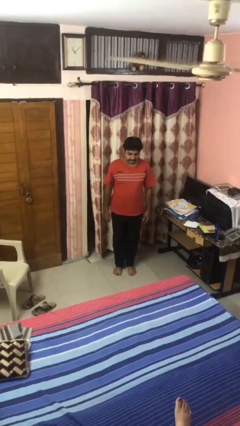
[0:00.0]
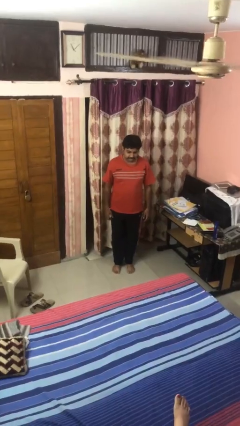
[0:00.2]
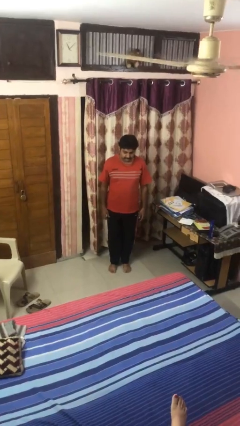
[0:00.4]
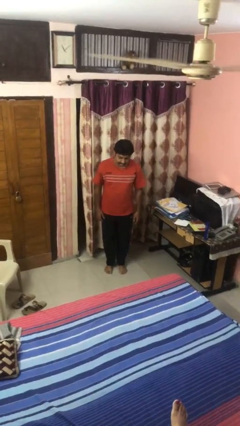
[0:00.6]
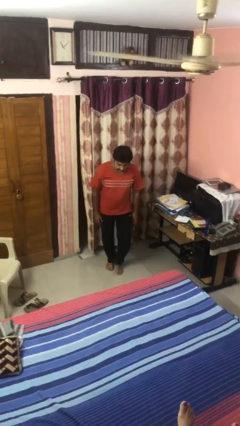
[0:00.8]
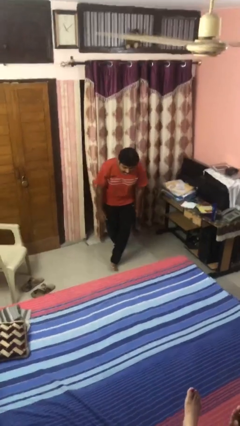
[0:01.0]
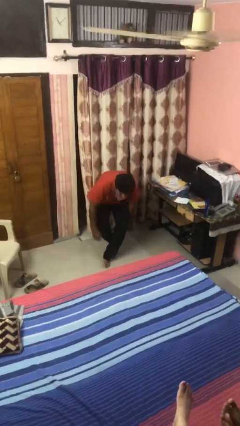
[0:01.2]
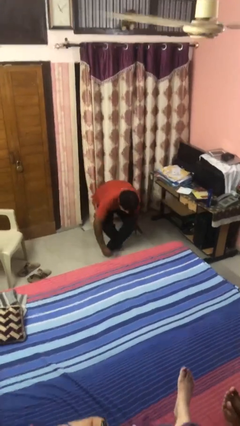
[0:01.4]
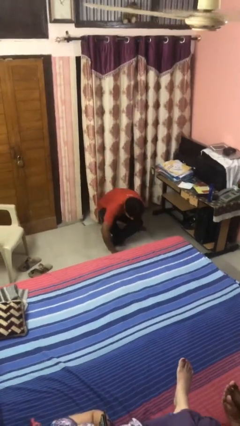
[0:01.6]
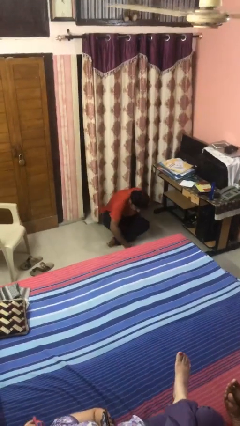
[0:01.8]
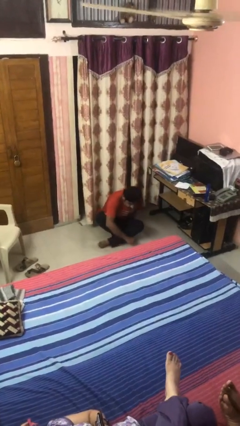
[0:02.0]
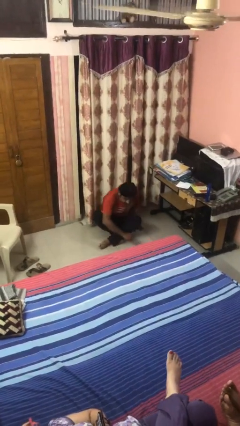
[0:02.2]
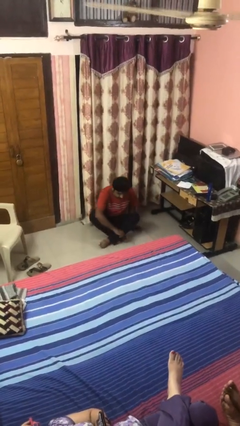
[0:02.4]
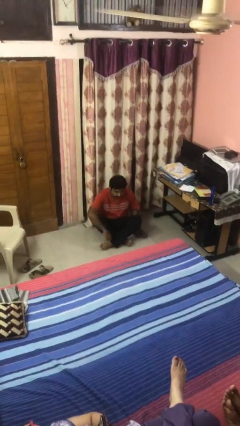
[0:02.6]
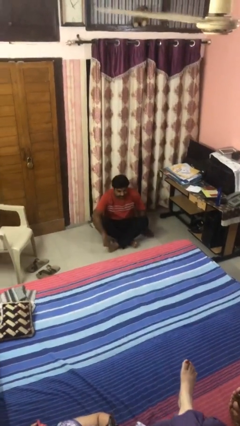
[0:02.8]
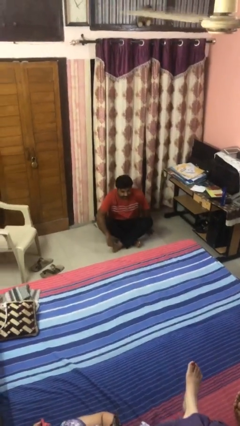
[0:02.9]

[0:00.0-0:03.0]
person sits crisscross

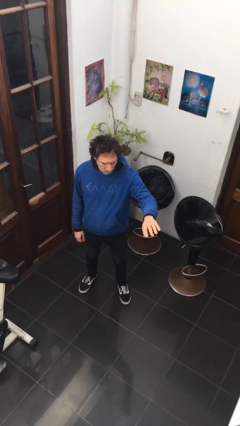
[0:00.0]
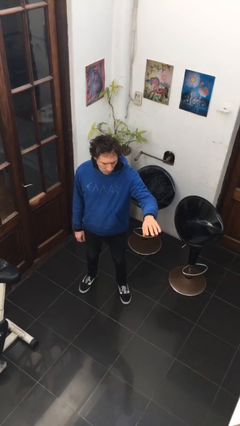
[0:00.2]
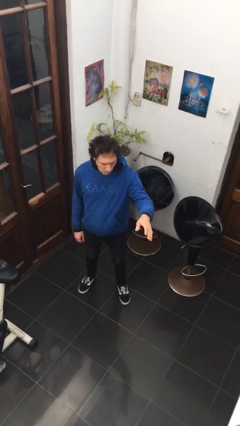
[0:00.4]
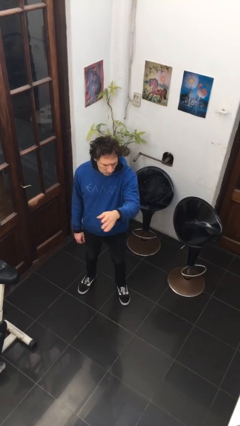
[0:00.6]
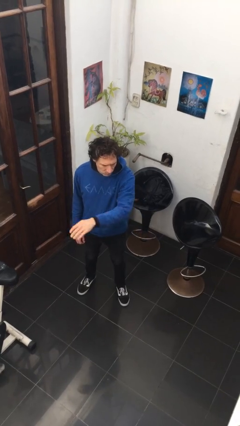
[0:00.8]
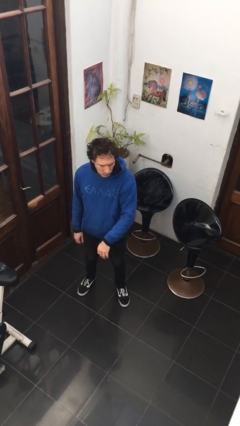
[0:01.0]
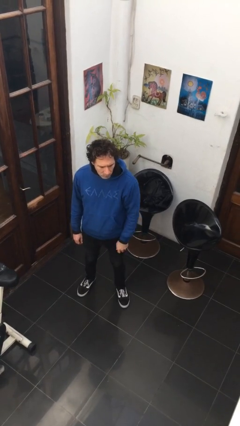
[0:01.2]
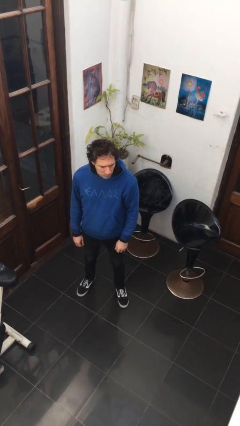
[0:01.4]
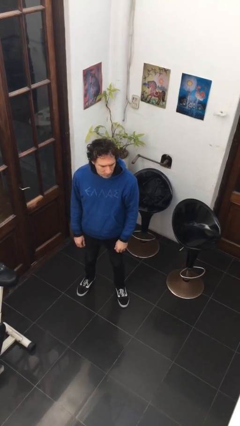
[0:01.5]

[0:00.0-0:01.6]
person gestures swipe right

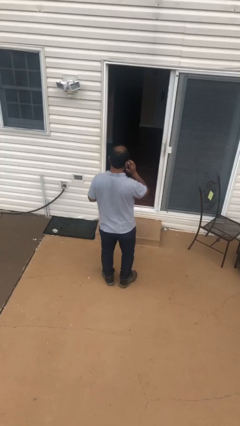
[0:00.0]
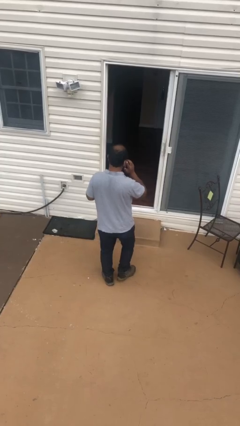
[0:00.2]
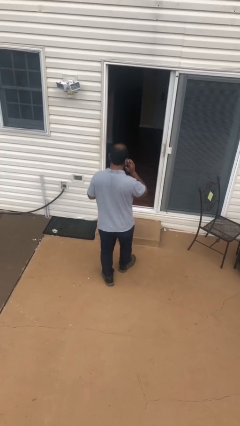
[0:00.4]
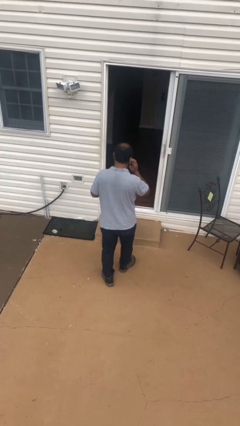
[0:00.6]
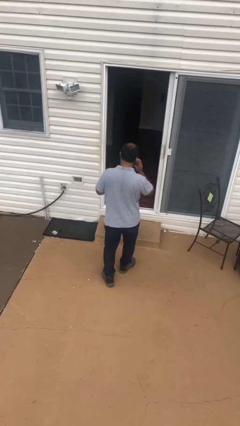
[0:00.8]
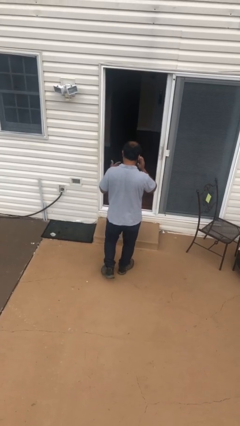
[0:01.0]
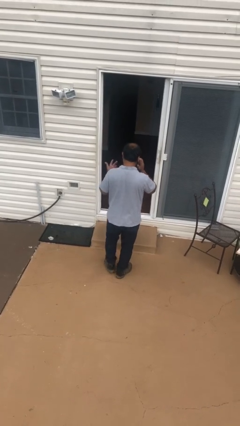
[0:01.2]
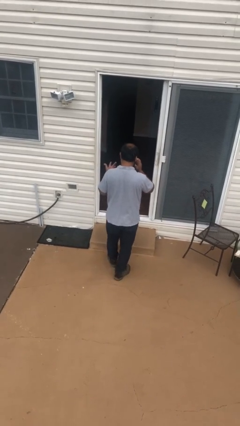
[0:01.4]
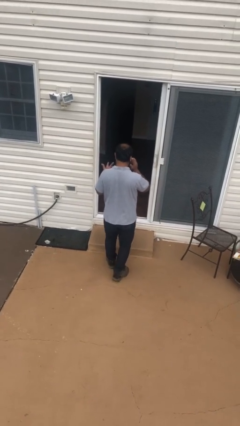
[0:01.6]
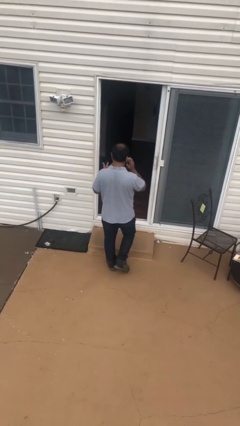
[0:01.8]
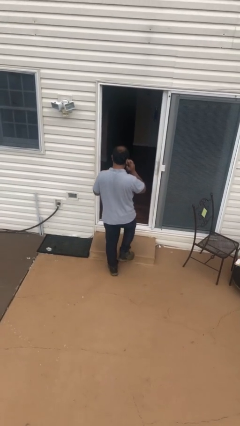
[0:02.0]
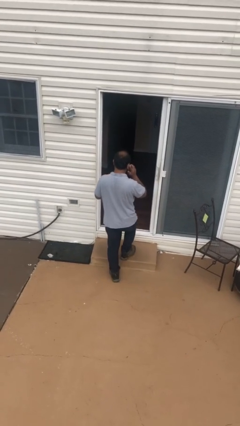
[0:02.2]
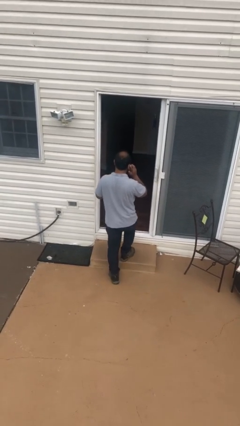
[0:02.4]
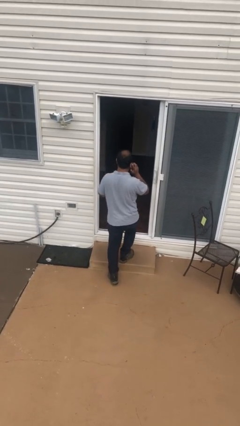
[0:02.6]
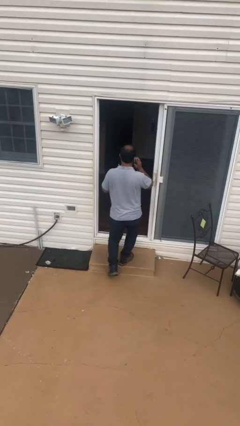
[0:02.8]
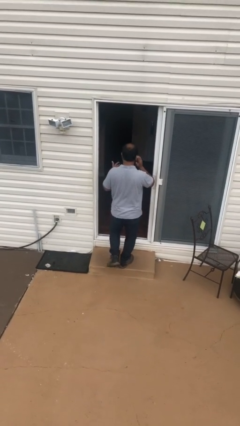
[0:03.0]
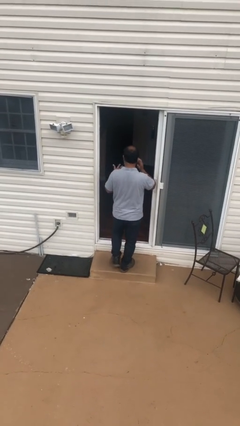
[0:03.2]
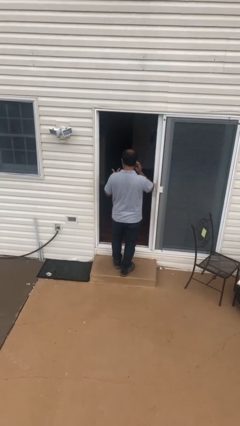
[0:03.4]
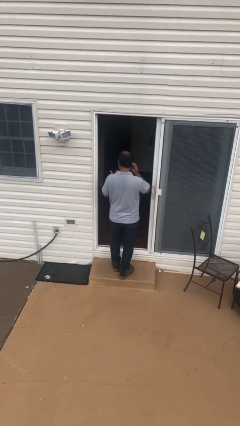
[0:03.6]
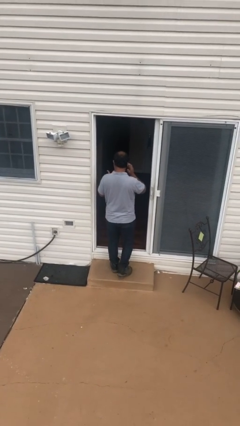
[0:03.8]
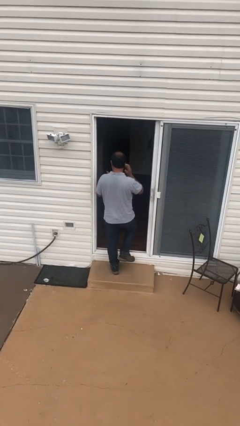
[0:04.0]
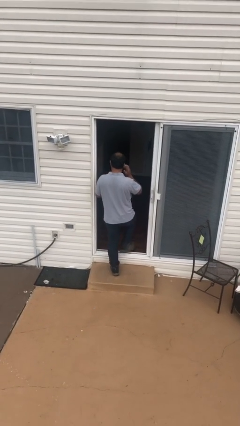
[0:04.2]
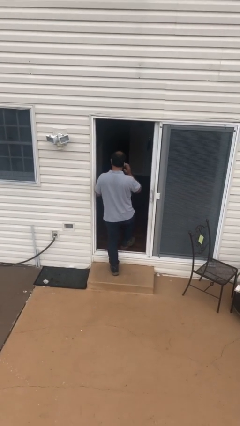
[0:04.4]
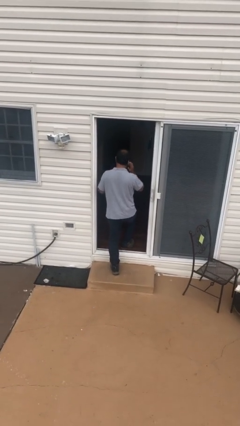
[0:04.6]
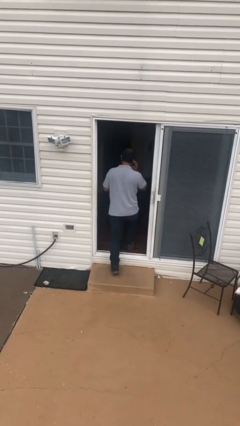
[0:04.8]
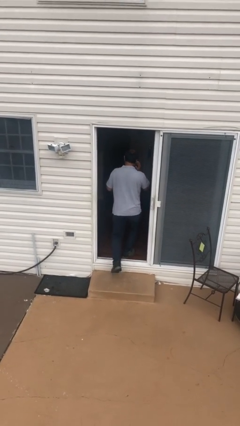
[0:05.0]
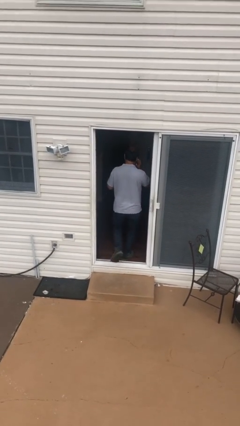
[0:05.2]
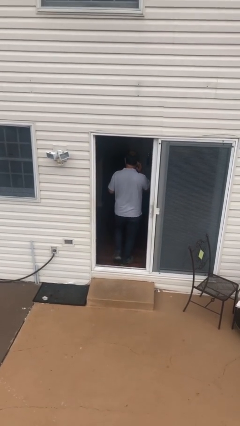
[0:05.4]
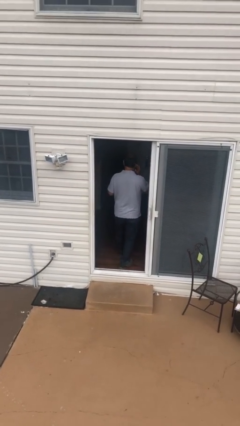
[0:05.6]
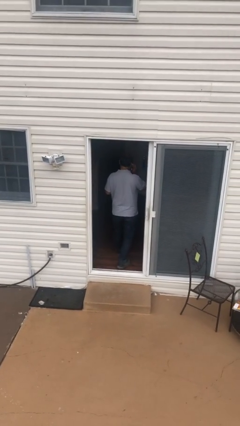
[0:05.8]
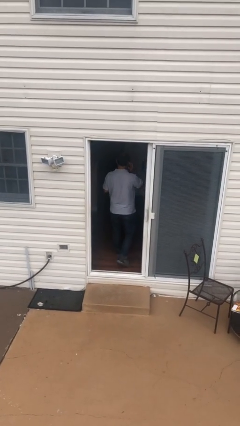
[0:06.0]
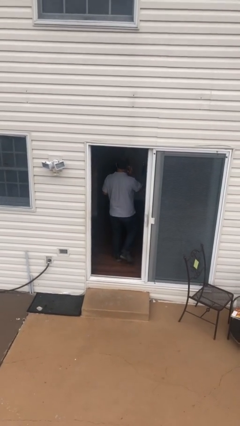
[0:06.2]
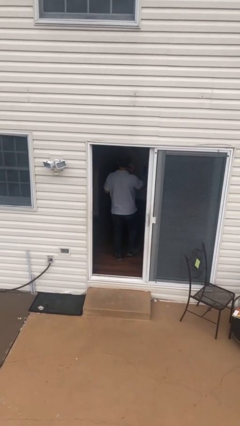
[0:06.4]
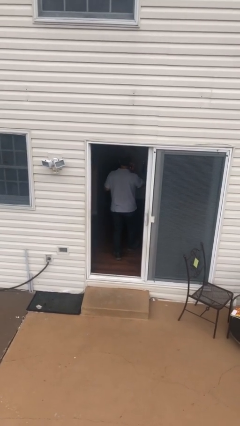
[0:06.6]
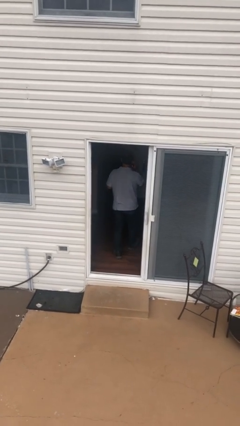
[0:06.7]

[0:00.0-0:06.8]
person exits scene through structure

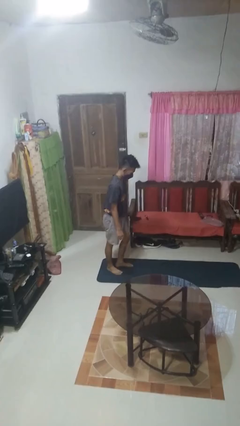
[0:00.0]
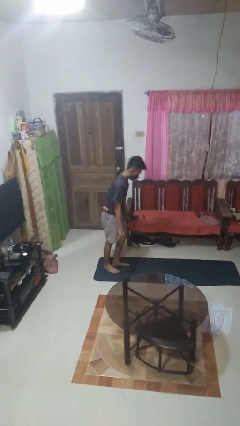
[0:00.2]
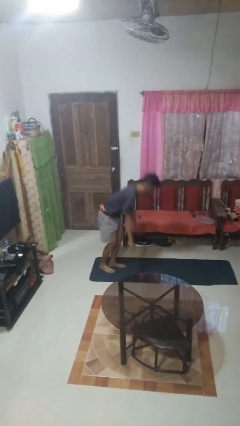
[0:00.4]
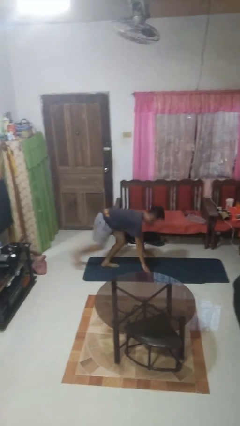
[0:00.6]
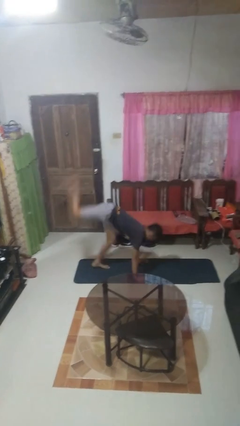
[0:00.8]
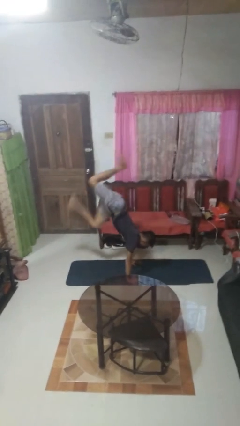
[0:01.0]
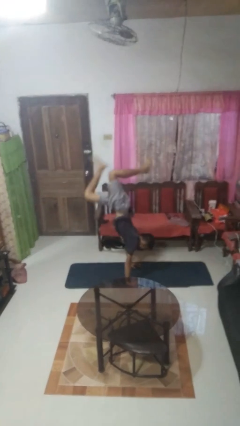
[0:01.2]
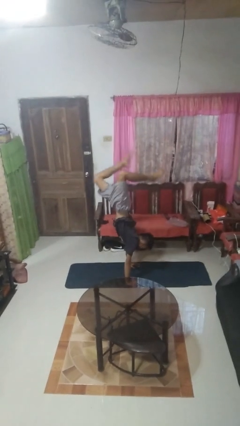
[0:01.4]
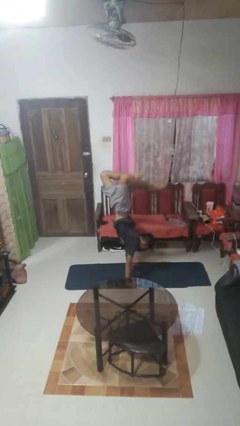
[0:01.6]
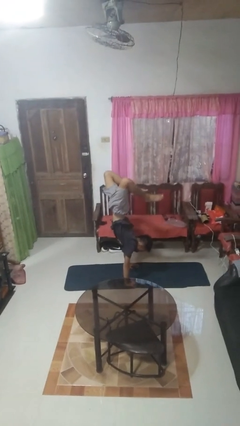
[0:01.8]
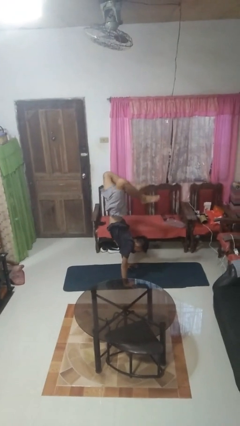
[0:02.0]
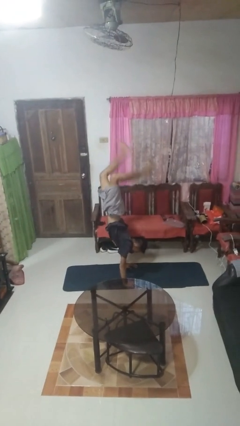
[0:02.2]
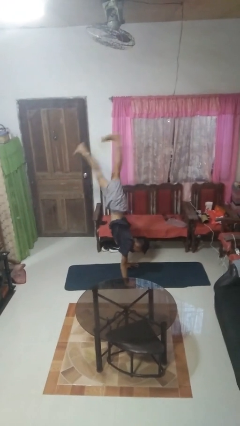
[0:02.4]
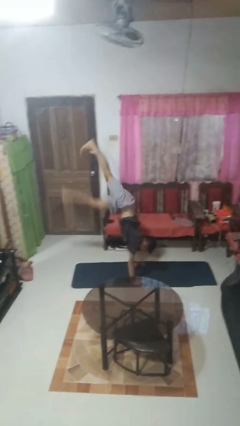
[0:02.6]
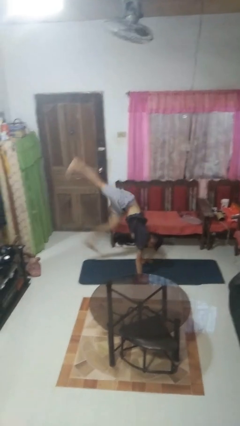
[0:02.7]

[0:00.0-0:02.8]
person handstand

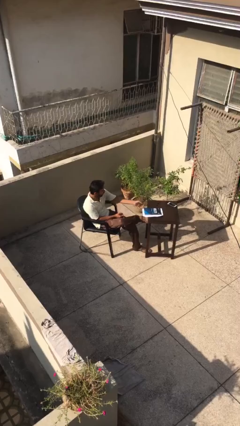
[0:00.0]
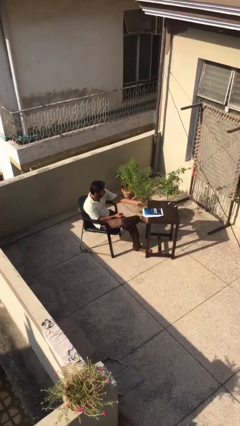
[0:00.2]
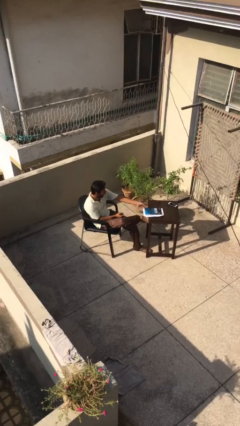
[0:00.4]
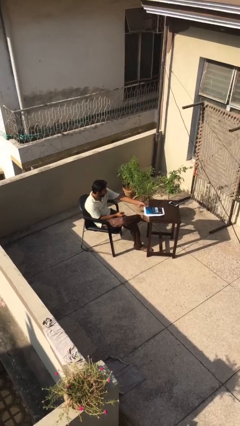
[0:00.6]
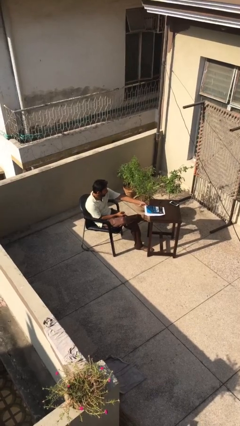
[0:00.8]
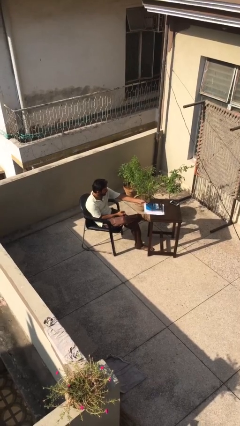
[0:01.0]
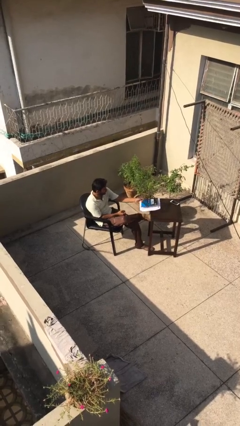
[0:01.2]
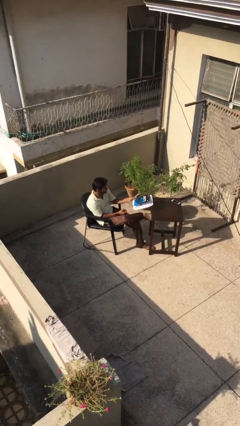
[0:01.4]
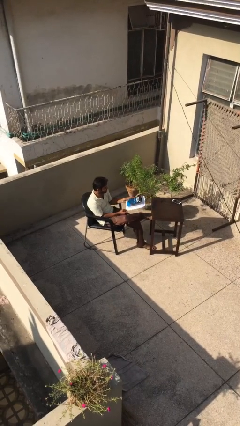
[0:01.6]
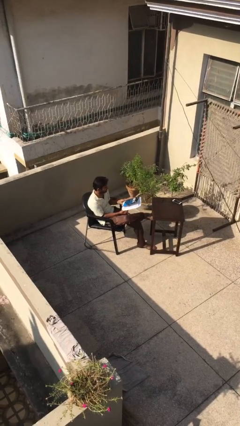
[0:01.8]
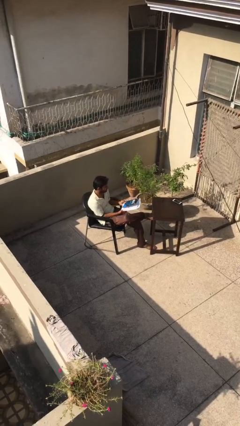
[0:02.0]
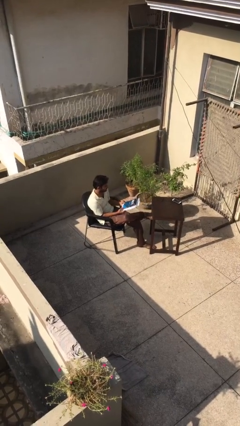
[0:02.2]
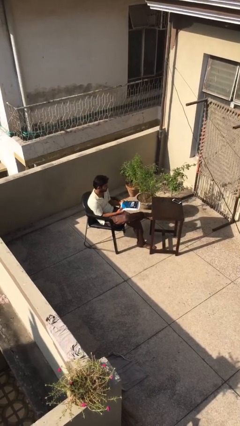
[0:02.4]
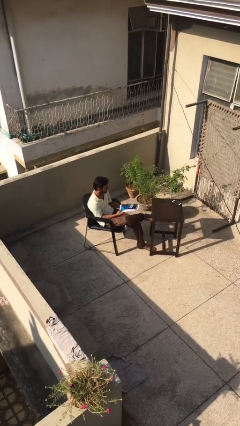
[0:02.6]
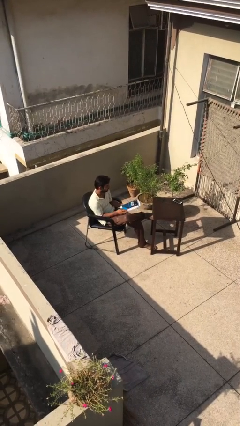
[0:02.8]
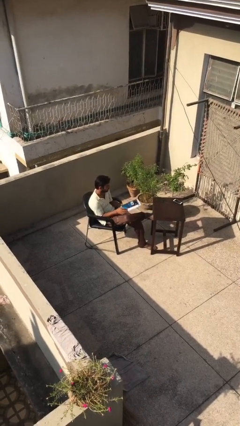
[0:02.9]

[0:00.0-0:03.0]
person picks up object from table
